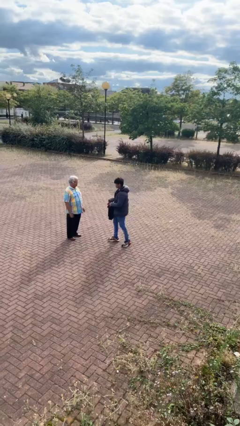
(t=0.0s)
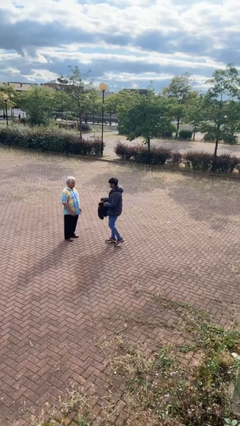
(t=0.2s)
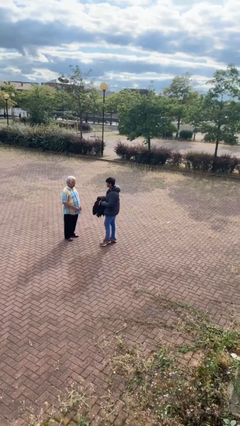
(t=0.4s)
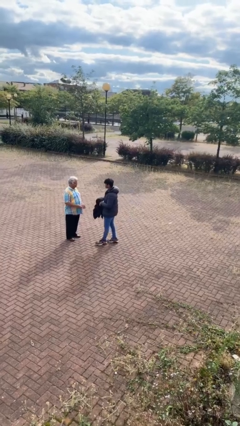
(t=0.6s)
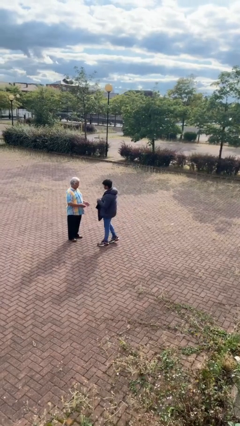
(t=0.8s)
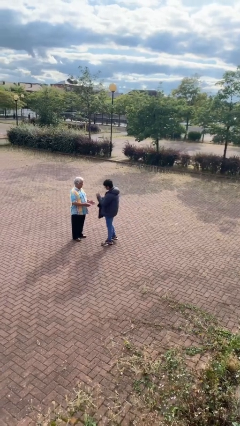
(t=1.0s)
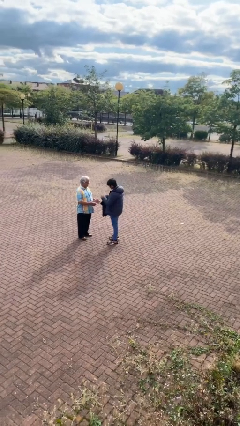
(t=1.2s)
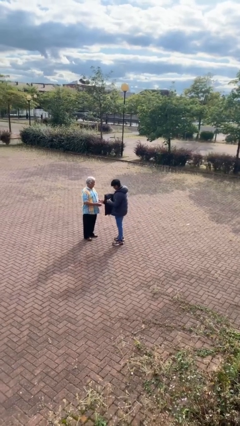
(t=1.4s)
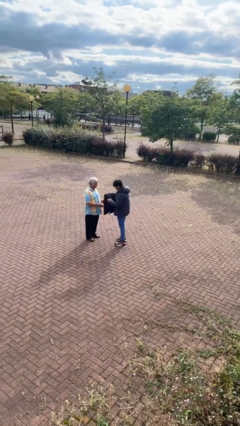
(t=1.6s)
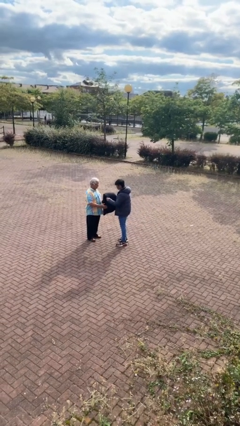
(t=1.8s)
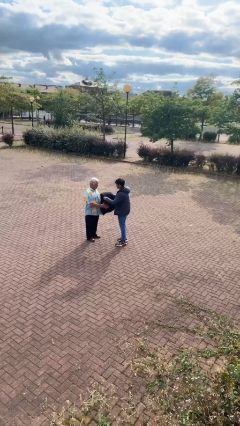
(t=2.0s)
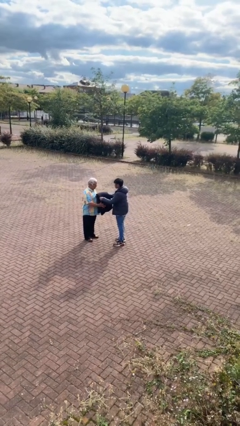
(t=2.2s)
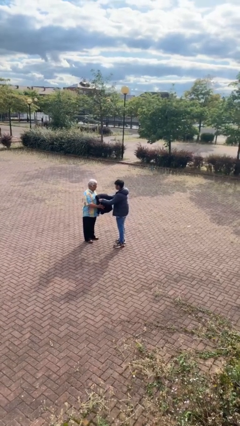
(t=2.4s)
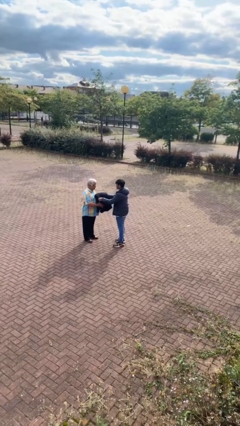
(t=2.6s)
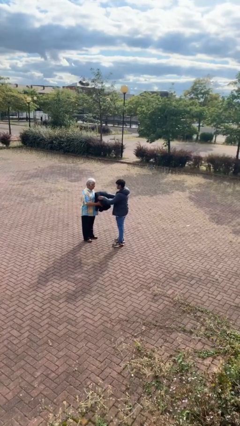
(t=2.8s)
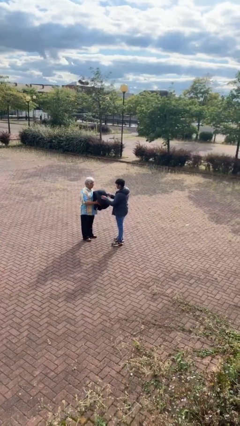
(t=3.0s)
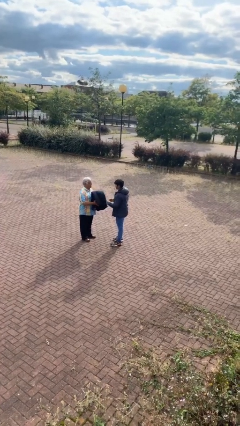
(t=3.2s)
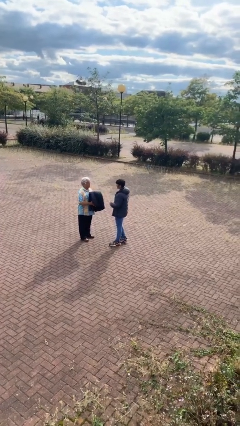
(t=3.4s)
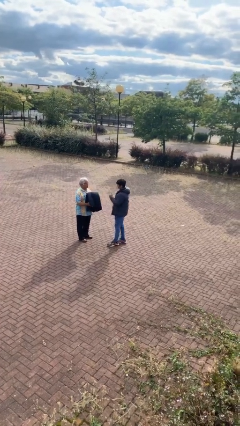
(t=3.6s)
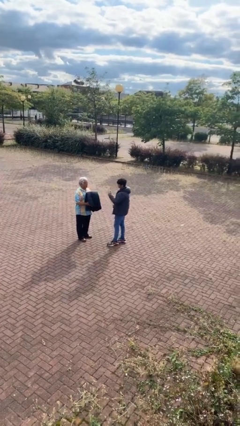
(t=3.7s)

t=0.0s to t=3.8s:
person transfers object to person

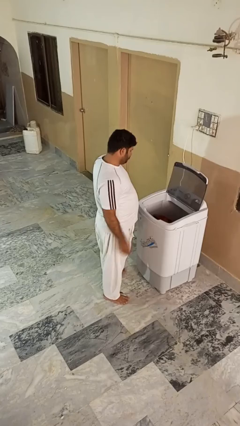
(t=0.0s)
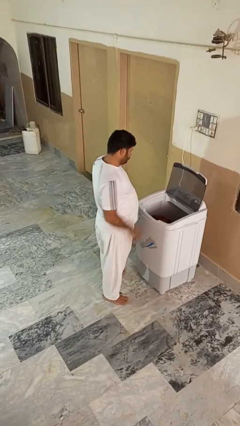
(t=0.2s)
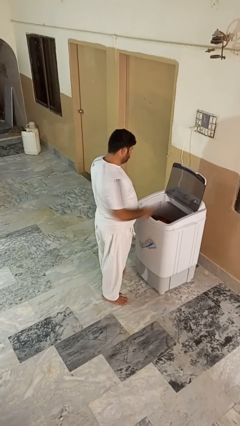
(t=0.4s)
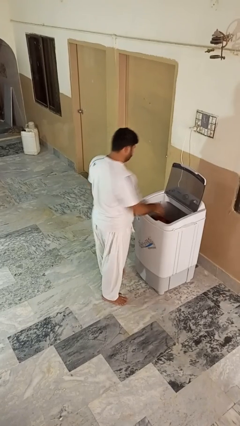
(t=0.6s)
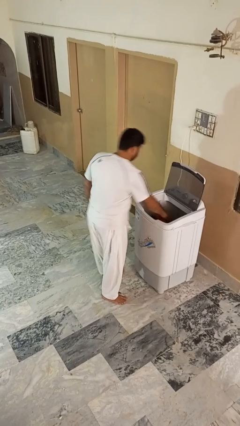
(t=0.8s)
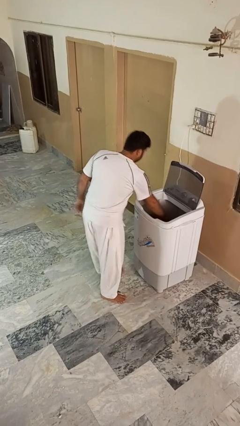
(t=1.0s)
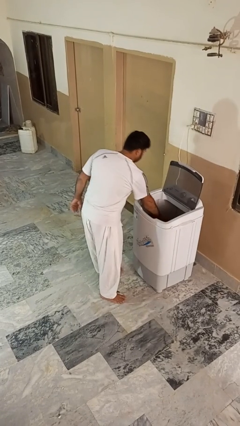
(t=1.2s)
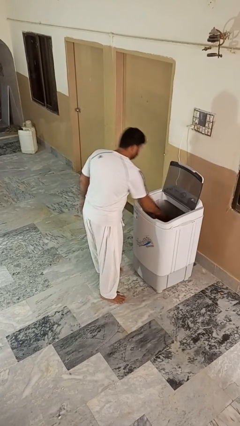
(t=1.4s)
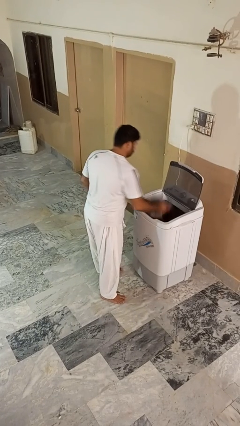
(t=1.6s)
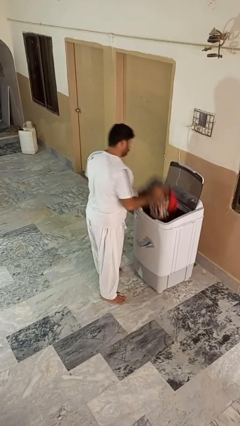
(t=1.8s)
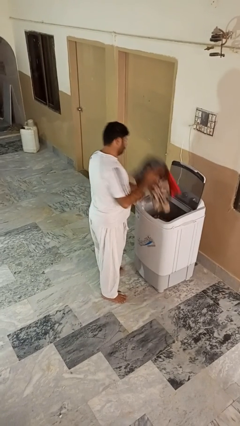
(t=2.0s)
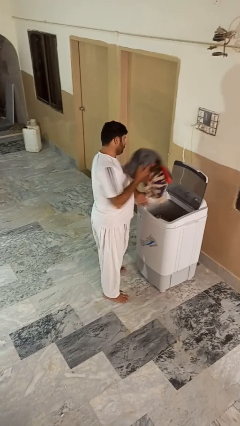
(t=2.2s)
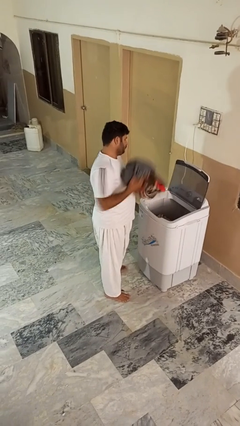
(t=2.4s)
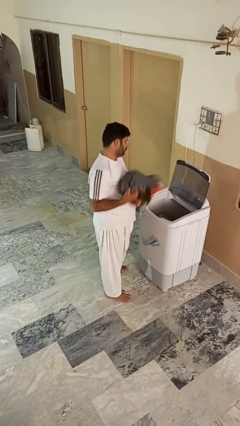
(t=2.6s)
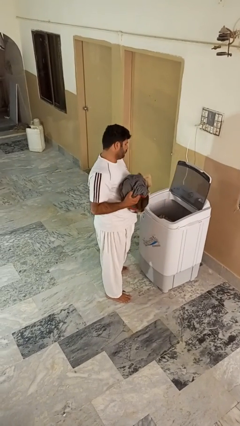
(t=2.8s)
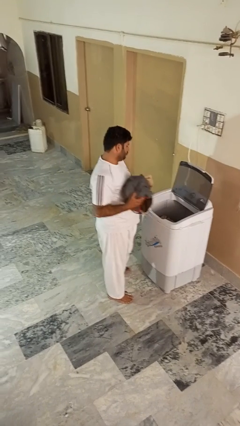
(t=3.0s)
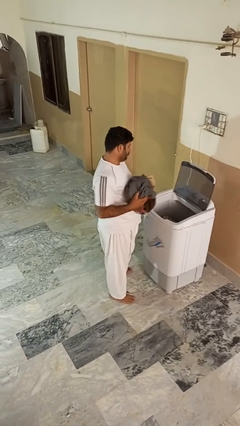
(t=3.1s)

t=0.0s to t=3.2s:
person unloads clotheswasher

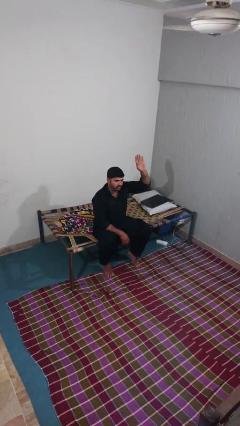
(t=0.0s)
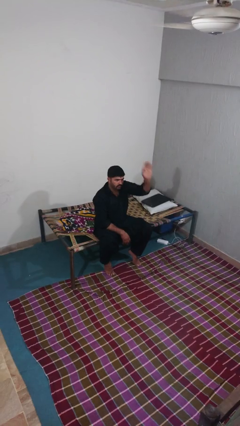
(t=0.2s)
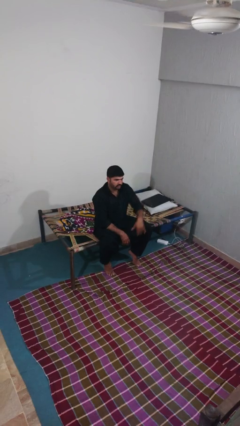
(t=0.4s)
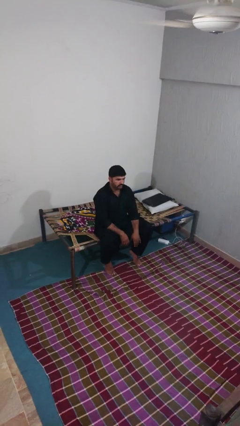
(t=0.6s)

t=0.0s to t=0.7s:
person gestures lower hand

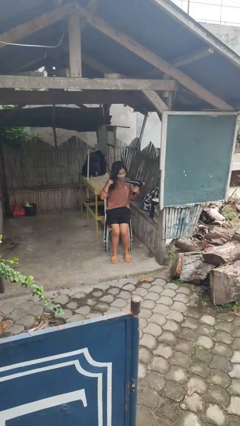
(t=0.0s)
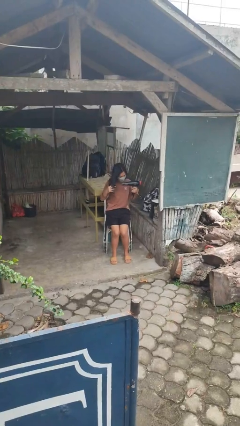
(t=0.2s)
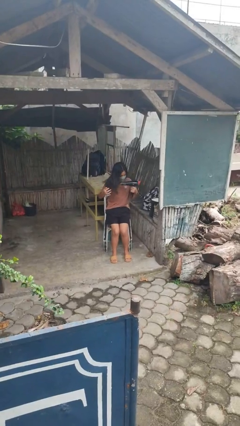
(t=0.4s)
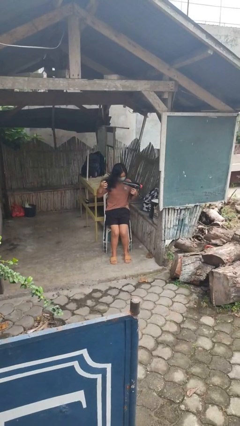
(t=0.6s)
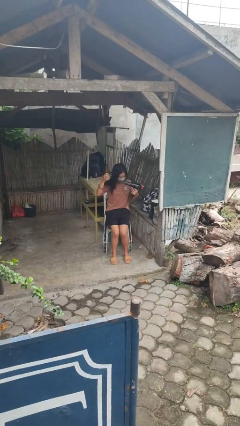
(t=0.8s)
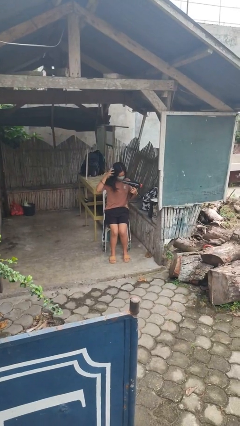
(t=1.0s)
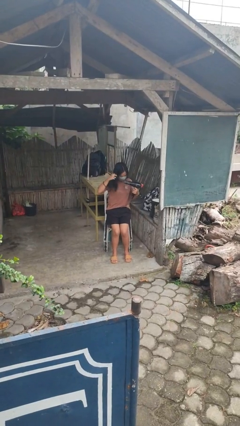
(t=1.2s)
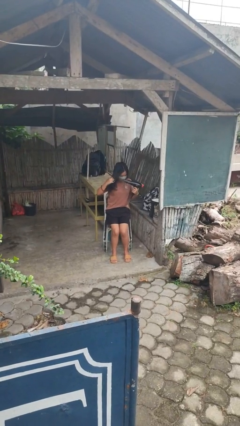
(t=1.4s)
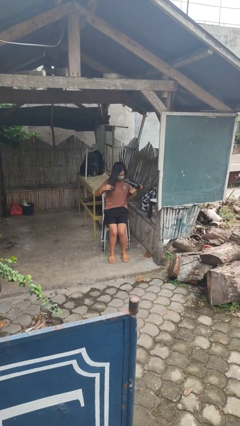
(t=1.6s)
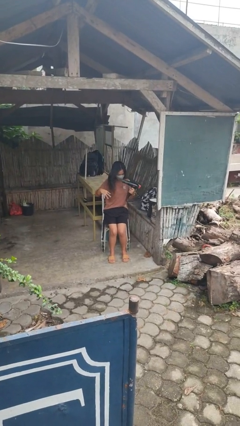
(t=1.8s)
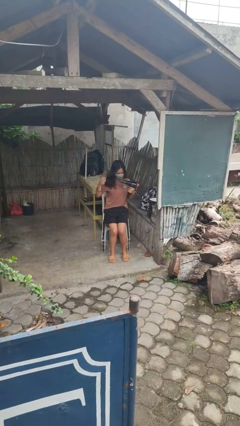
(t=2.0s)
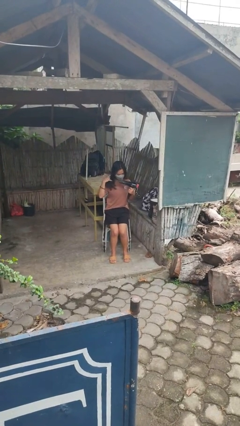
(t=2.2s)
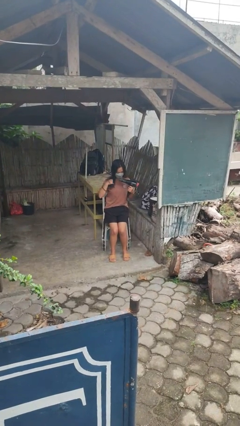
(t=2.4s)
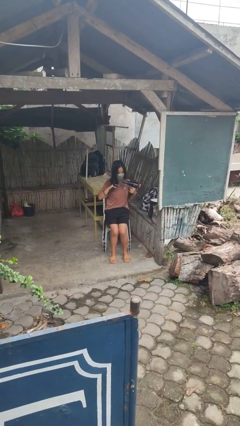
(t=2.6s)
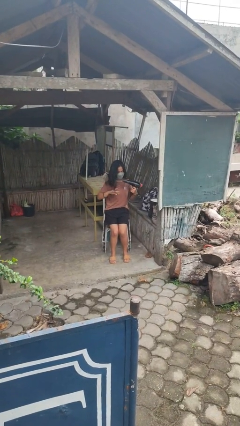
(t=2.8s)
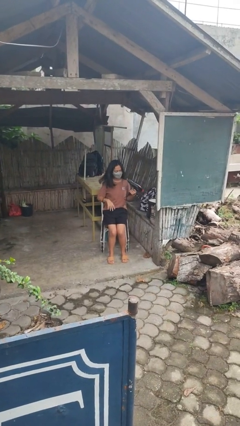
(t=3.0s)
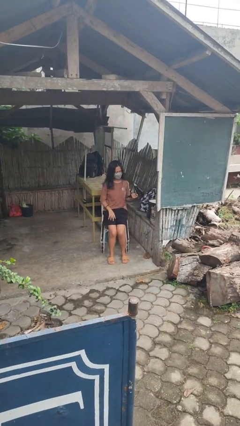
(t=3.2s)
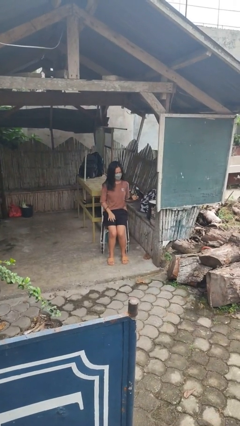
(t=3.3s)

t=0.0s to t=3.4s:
person dries hair with hairdryer

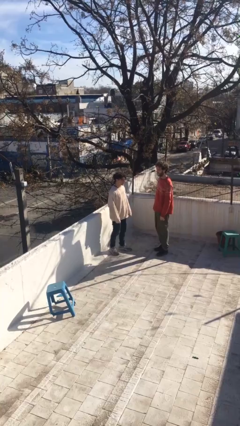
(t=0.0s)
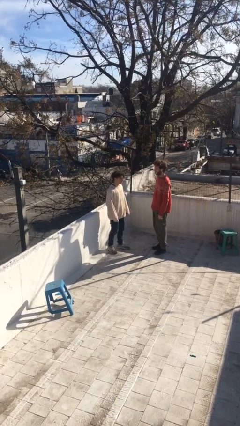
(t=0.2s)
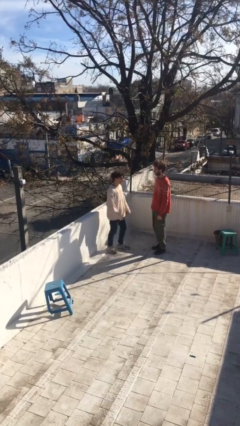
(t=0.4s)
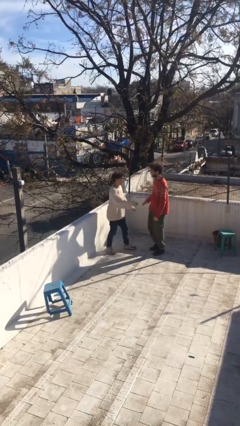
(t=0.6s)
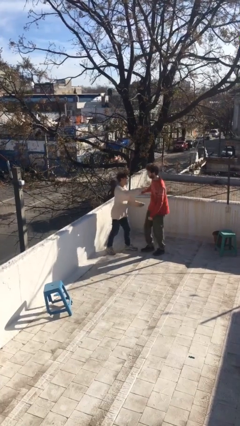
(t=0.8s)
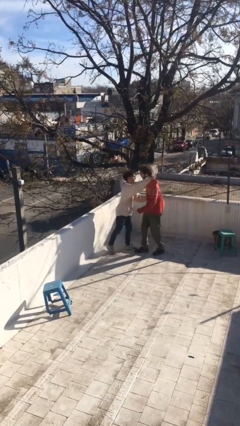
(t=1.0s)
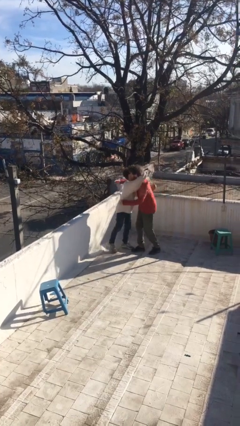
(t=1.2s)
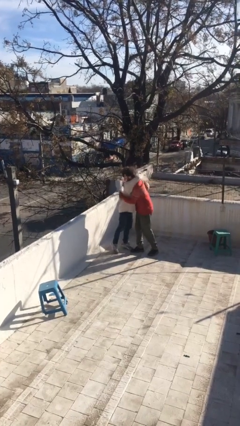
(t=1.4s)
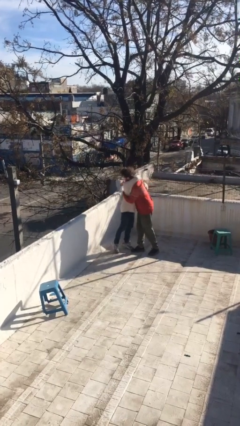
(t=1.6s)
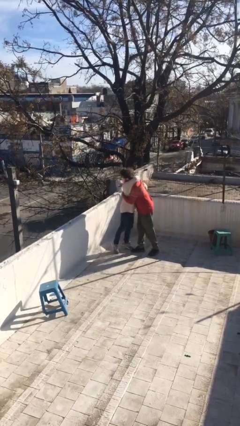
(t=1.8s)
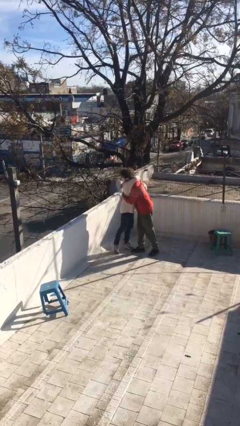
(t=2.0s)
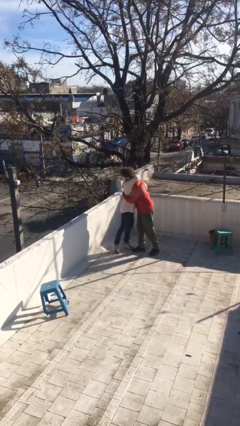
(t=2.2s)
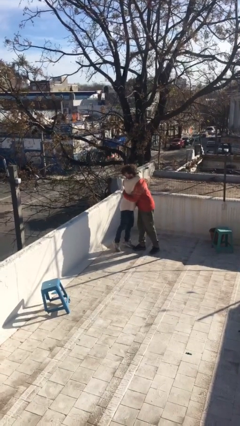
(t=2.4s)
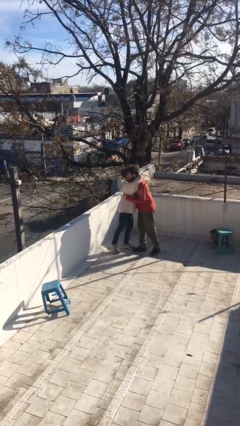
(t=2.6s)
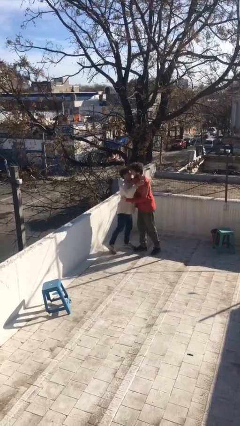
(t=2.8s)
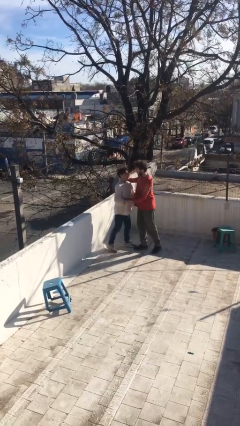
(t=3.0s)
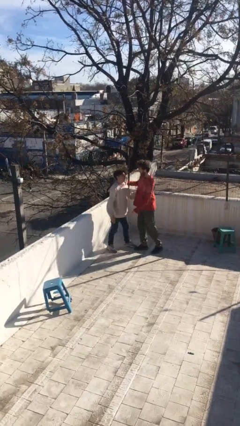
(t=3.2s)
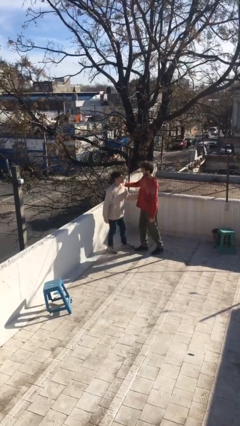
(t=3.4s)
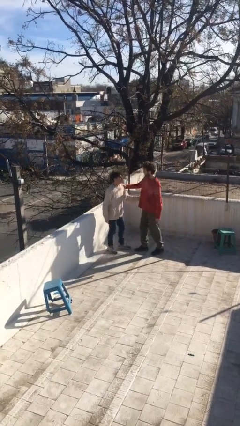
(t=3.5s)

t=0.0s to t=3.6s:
person embraces person

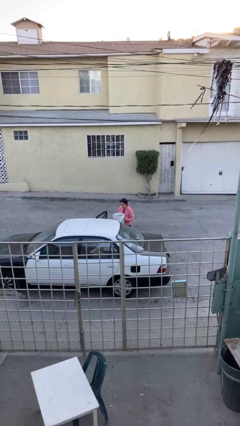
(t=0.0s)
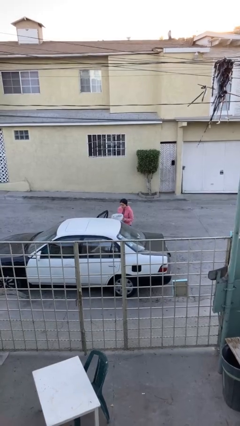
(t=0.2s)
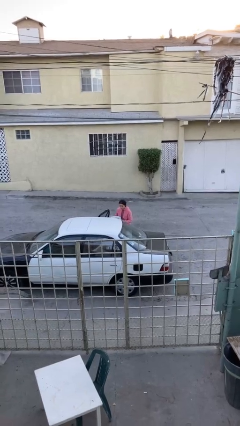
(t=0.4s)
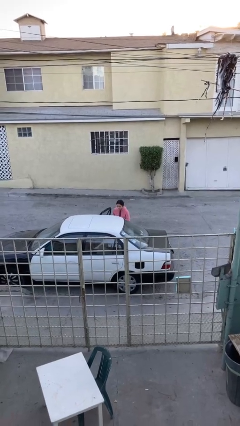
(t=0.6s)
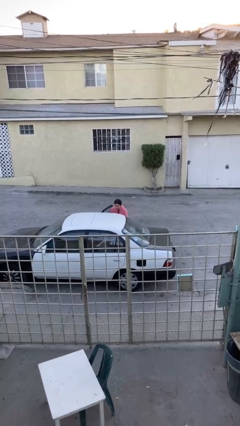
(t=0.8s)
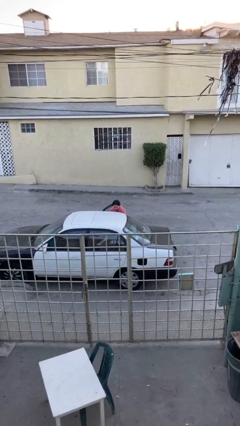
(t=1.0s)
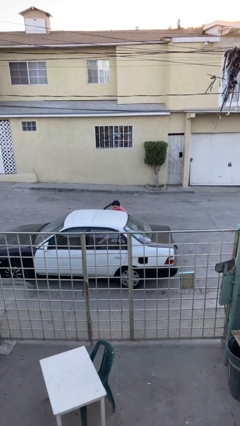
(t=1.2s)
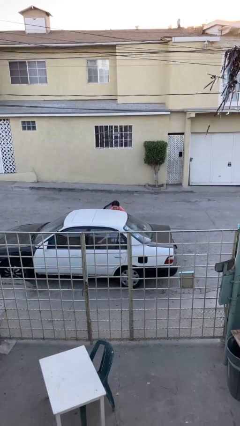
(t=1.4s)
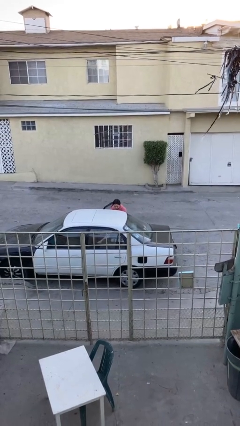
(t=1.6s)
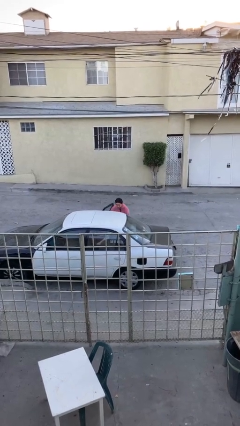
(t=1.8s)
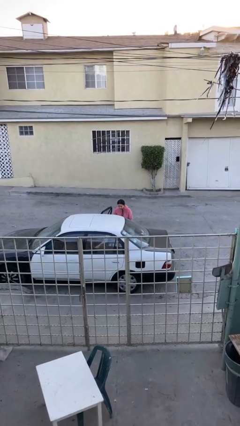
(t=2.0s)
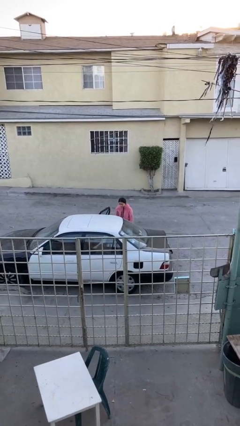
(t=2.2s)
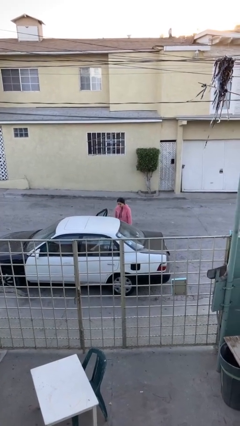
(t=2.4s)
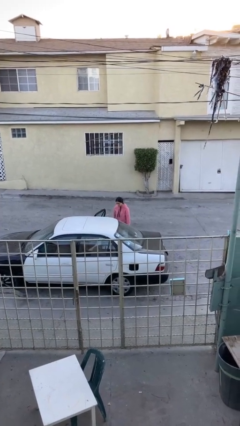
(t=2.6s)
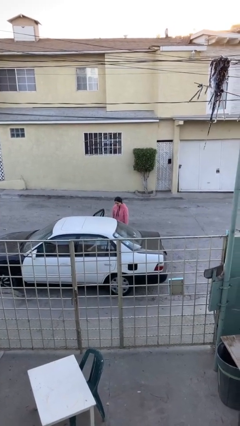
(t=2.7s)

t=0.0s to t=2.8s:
person loads car

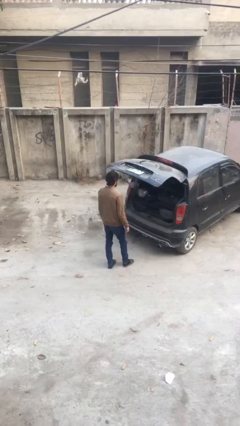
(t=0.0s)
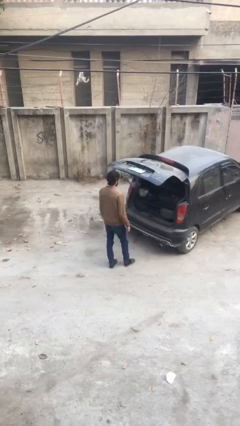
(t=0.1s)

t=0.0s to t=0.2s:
person closes car trunk
